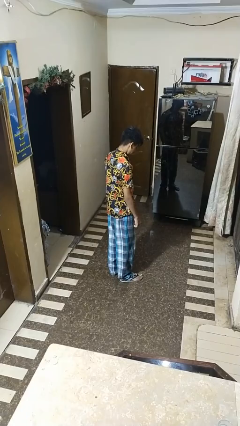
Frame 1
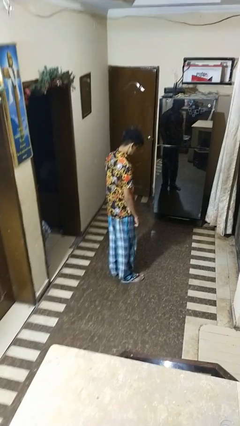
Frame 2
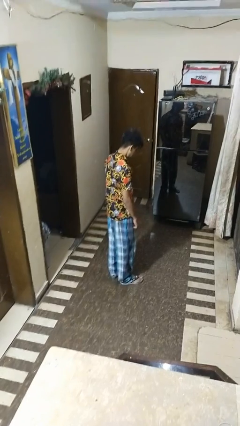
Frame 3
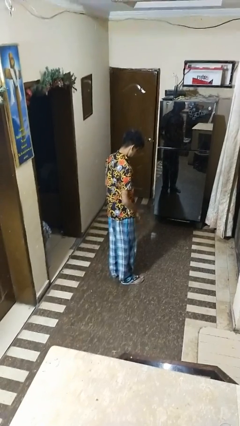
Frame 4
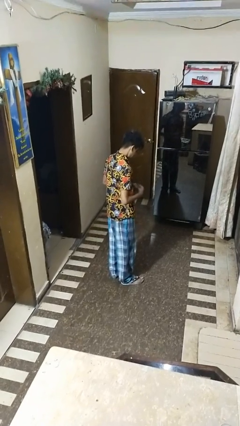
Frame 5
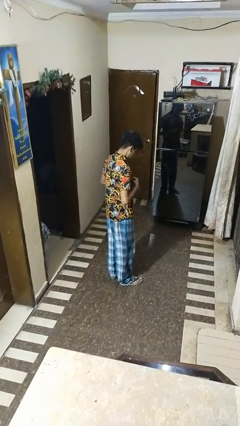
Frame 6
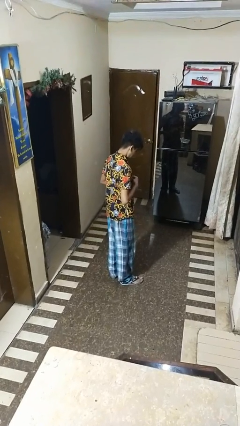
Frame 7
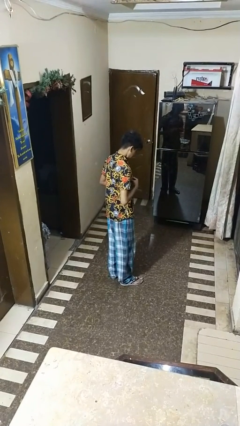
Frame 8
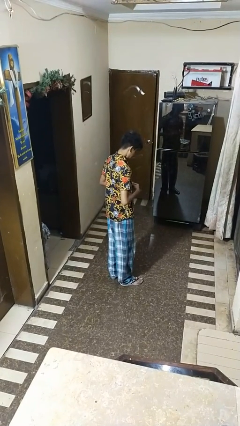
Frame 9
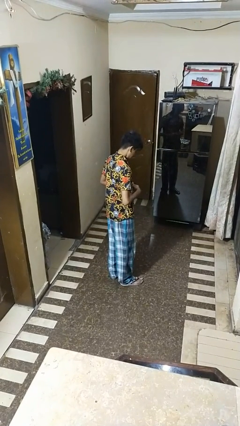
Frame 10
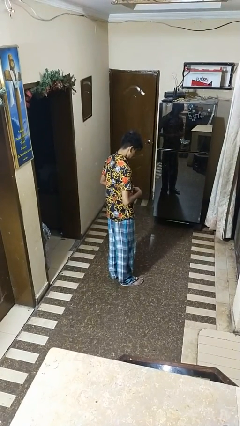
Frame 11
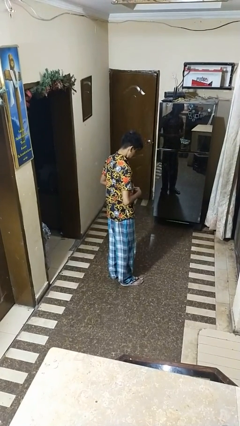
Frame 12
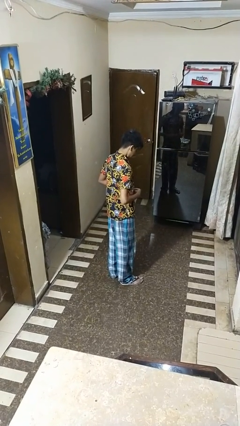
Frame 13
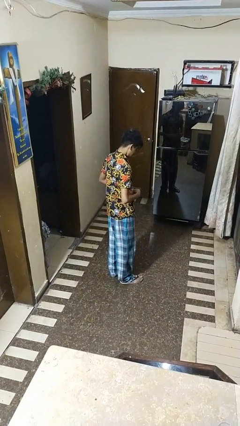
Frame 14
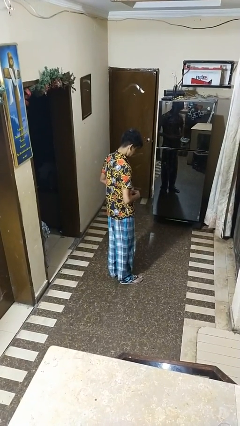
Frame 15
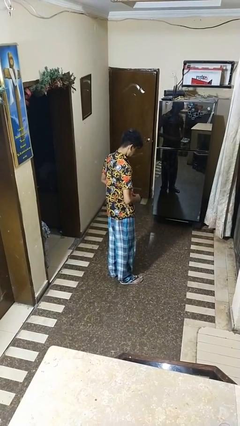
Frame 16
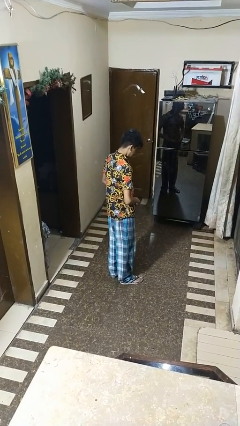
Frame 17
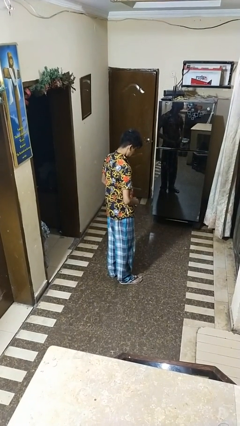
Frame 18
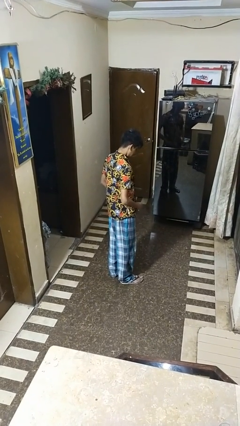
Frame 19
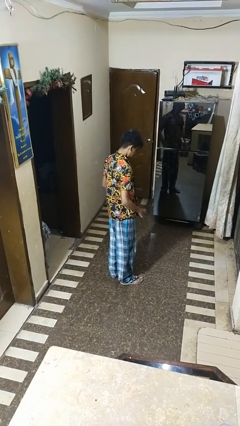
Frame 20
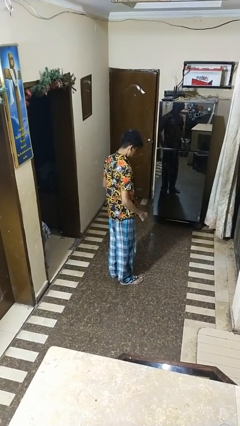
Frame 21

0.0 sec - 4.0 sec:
person unbuttons shirt

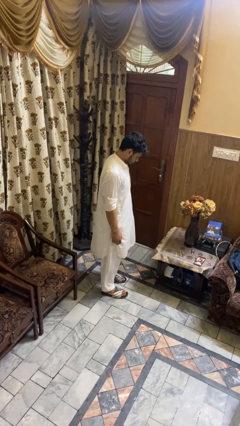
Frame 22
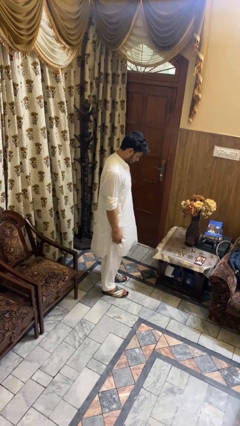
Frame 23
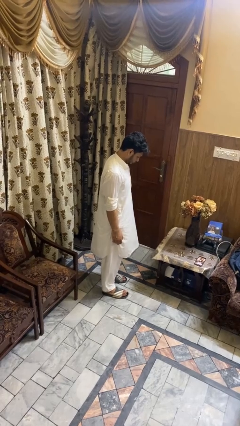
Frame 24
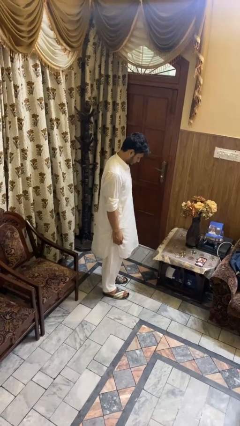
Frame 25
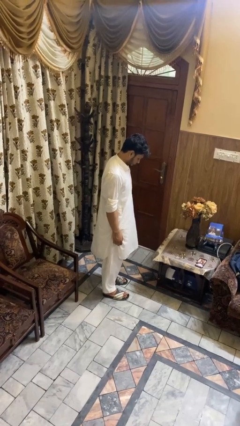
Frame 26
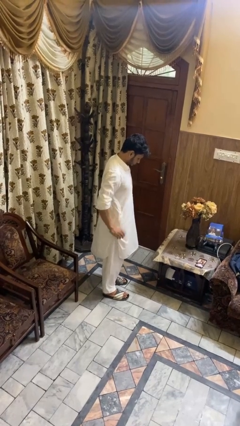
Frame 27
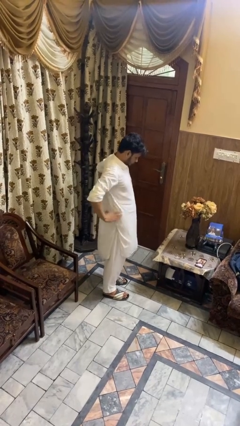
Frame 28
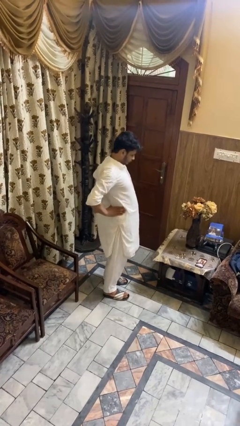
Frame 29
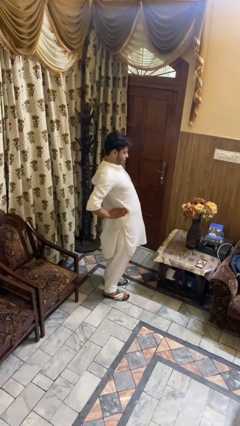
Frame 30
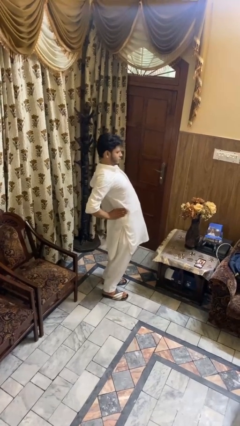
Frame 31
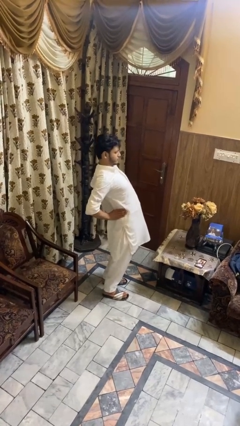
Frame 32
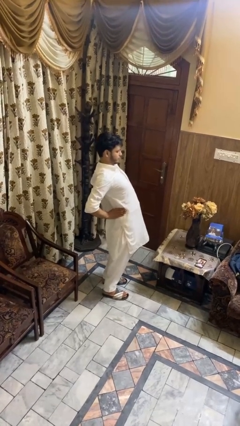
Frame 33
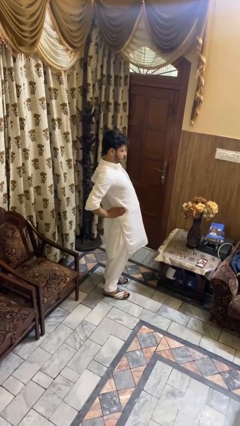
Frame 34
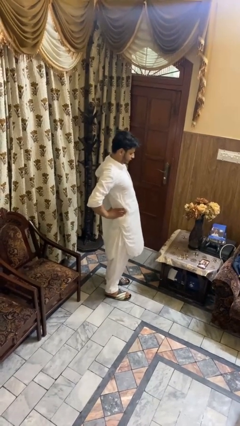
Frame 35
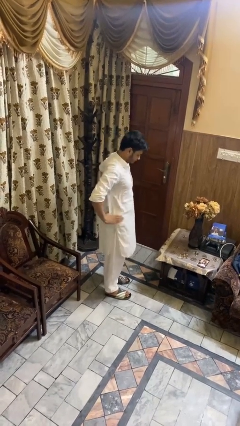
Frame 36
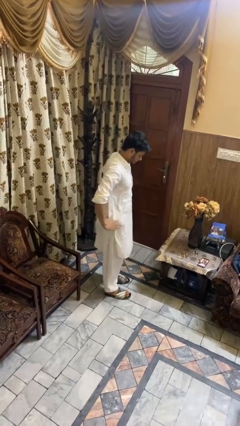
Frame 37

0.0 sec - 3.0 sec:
person stretches back

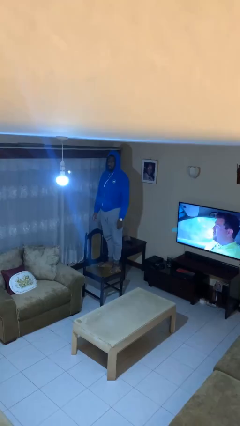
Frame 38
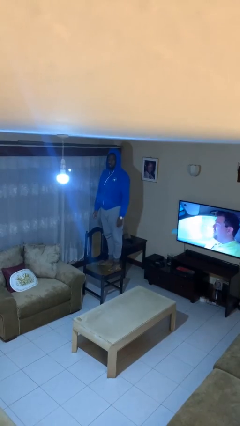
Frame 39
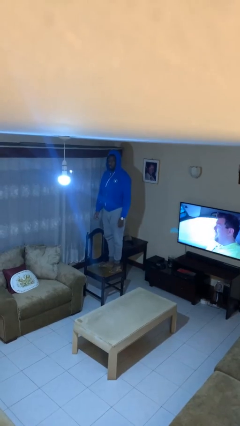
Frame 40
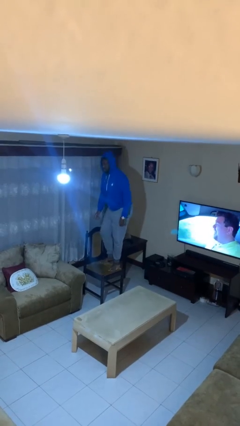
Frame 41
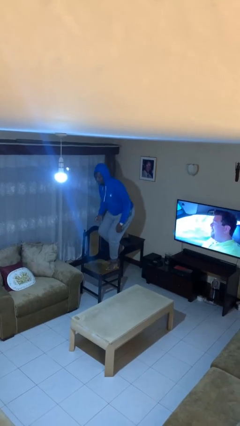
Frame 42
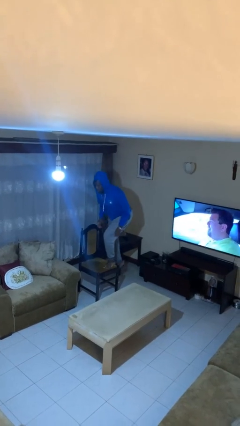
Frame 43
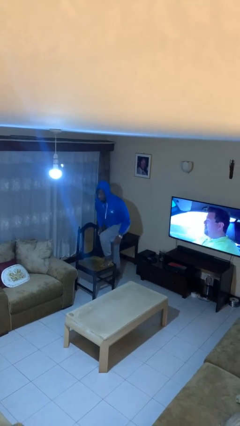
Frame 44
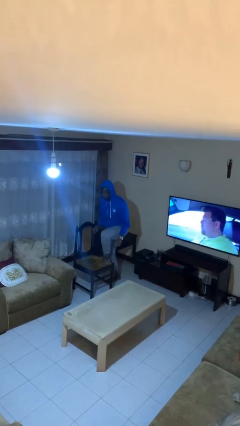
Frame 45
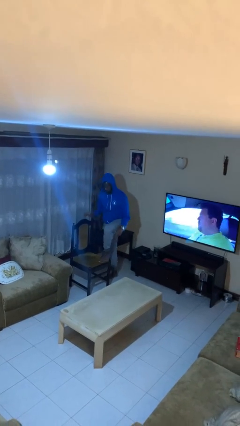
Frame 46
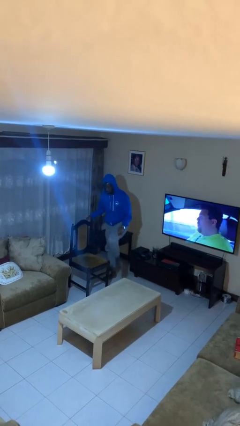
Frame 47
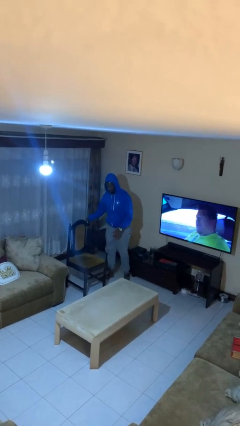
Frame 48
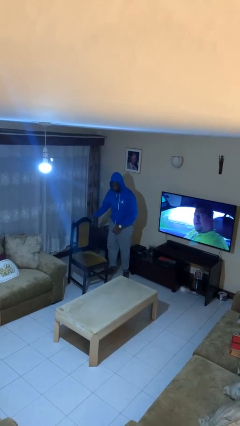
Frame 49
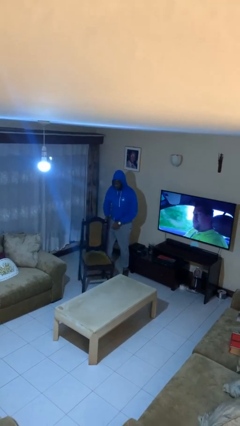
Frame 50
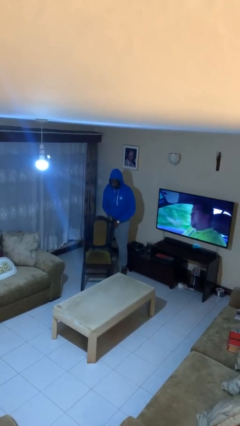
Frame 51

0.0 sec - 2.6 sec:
person climbs off chair

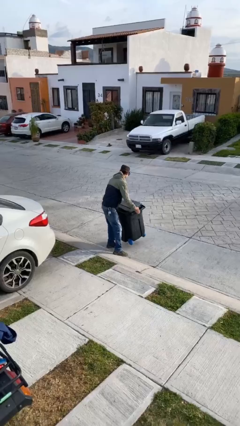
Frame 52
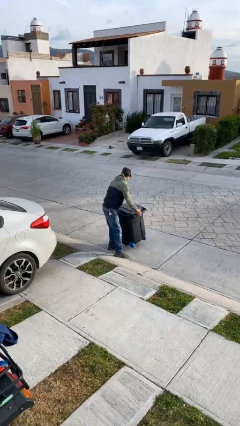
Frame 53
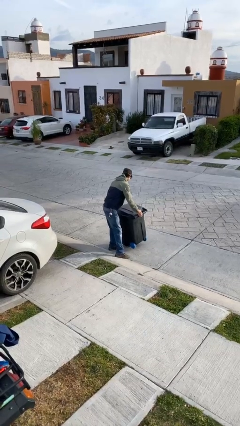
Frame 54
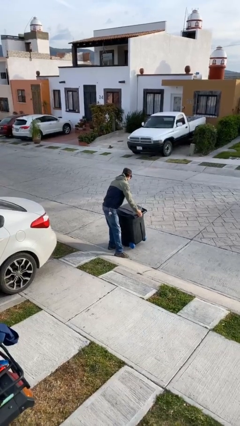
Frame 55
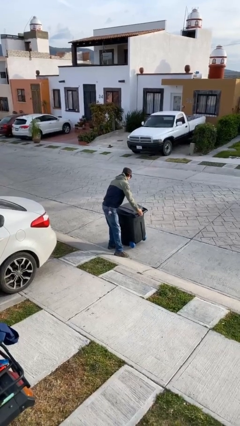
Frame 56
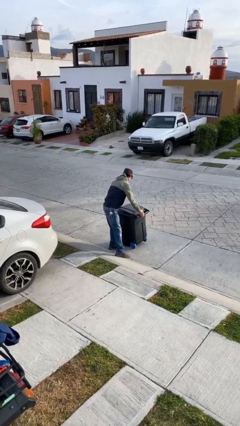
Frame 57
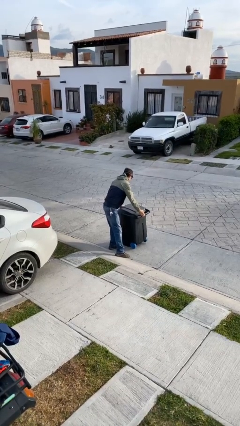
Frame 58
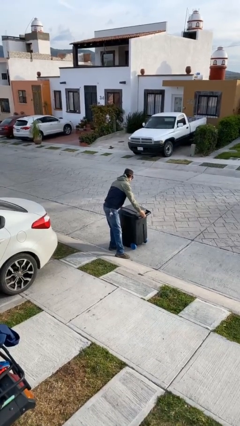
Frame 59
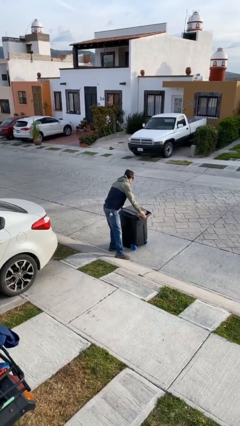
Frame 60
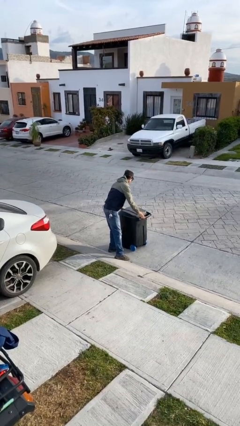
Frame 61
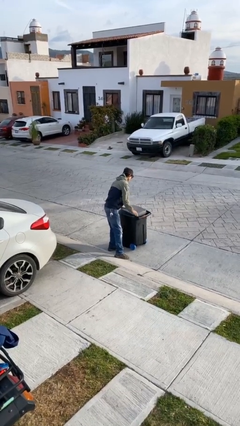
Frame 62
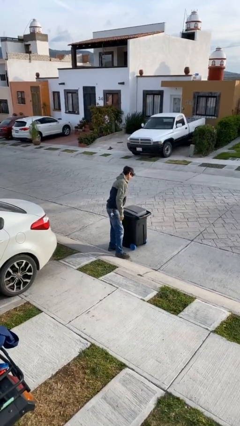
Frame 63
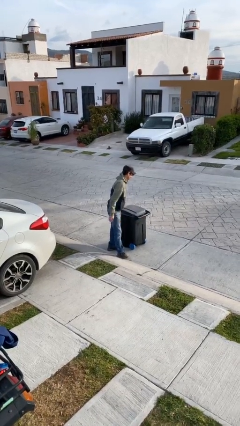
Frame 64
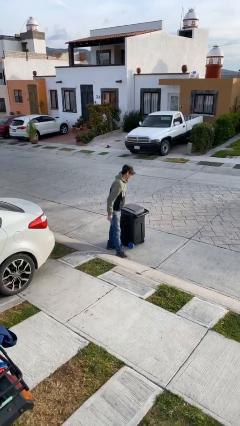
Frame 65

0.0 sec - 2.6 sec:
person puts down object on floor

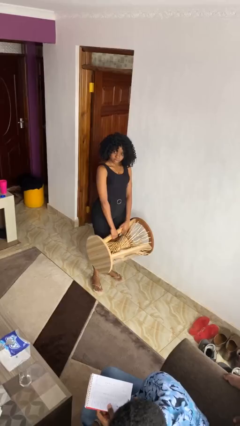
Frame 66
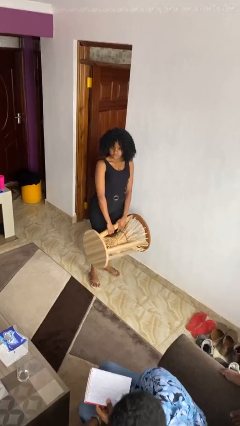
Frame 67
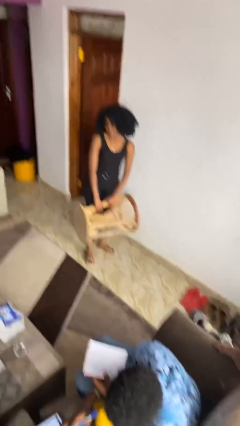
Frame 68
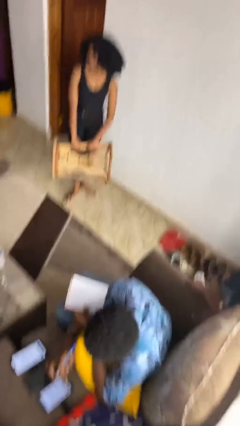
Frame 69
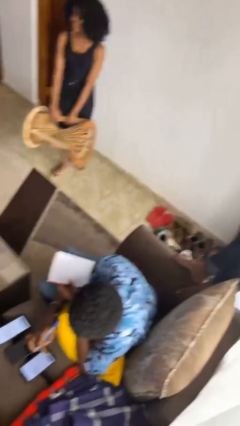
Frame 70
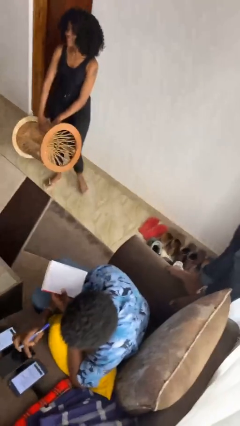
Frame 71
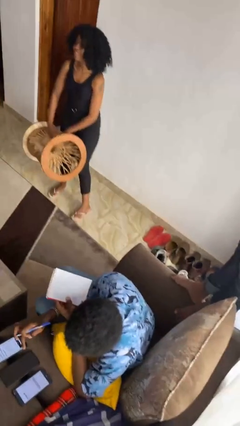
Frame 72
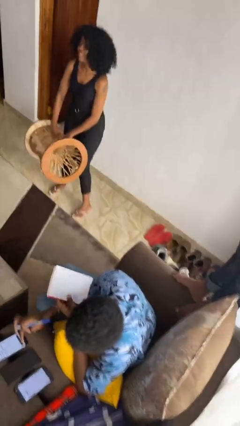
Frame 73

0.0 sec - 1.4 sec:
person carries furniture

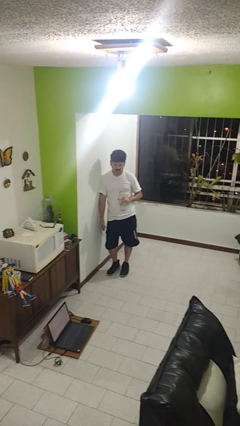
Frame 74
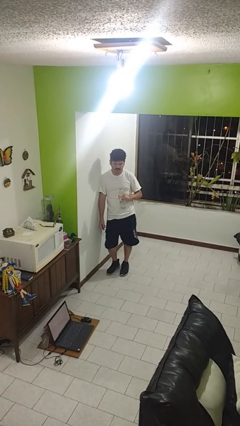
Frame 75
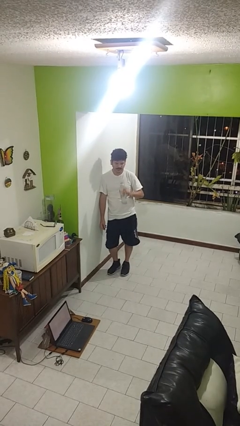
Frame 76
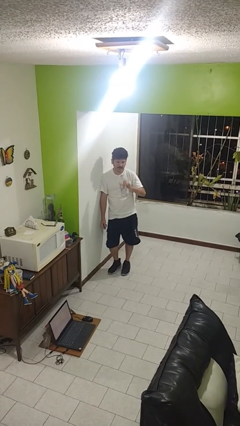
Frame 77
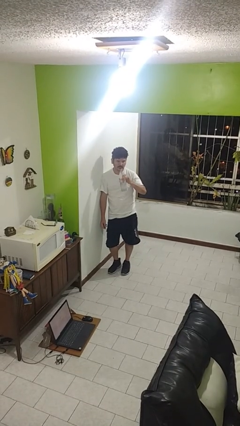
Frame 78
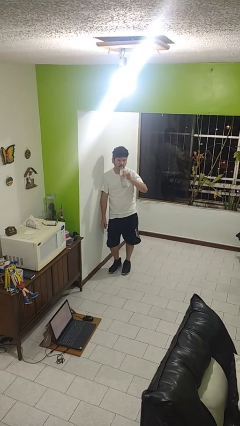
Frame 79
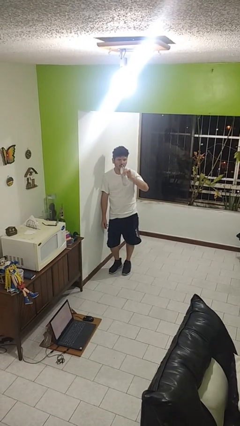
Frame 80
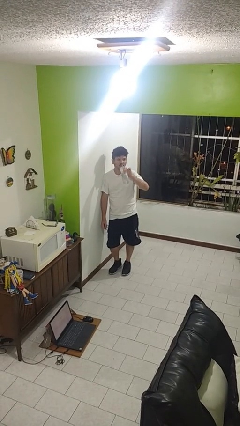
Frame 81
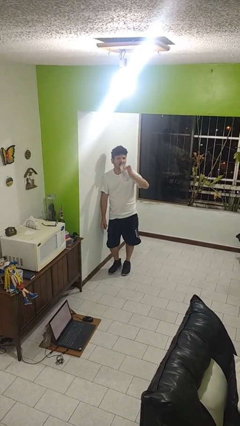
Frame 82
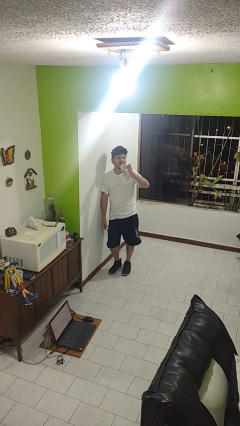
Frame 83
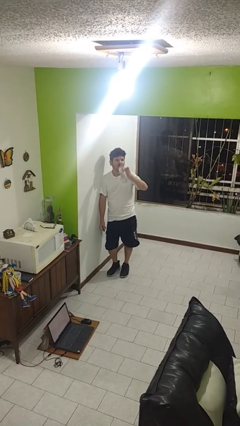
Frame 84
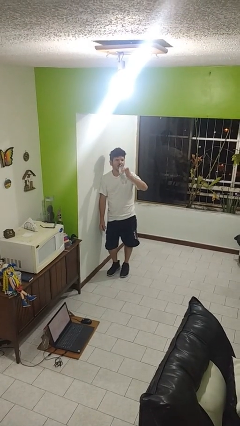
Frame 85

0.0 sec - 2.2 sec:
person drinks from bottle

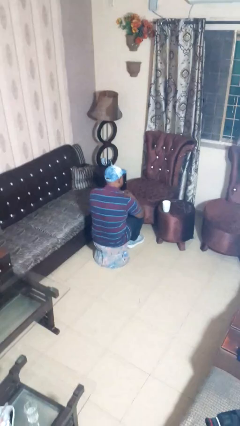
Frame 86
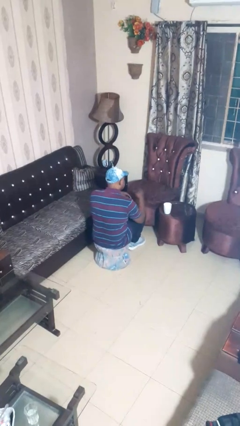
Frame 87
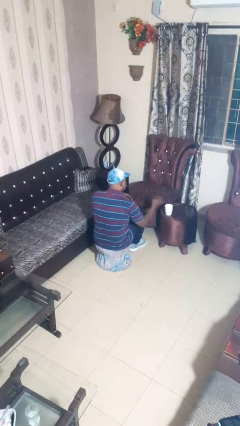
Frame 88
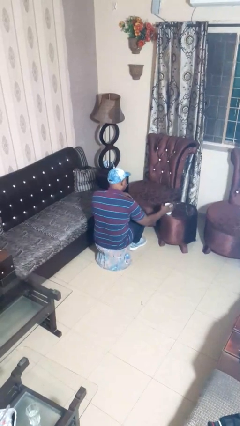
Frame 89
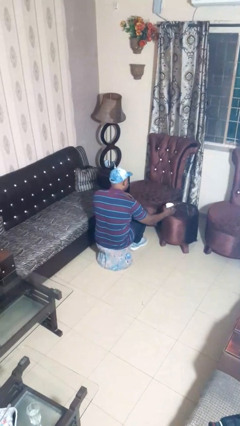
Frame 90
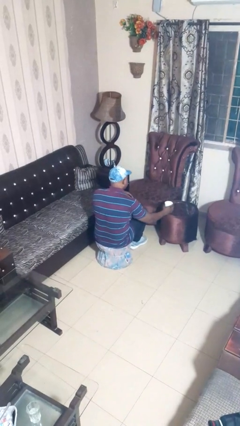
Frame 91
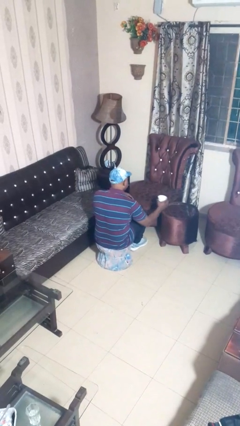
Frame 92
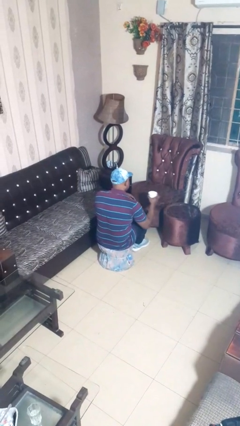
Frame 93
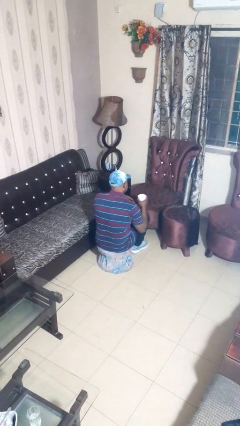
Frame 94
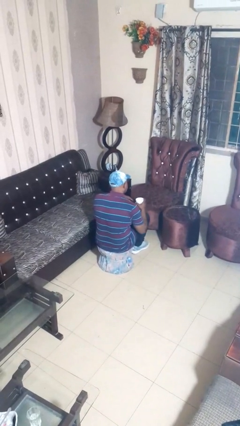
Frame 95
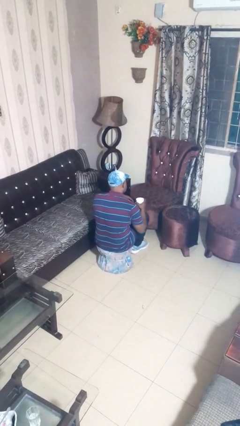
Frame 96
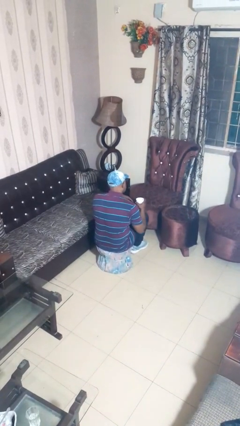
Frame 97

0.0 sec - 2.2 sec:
person picks up object from table
